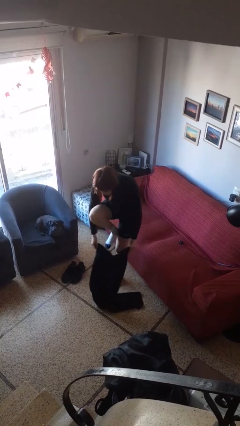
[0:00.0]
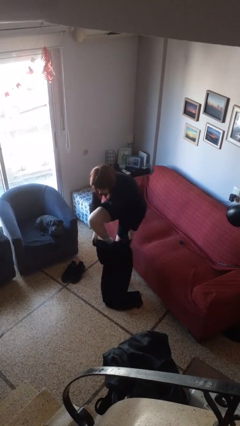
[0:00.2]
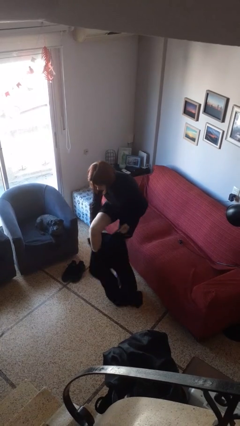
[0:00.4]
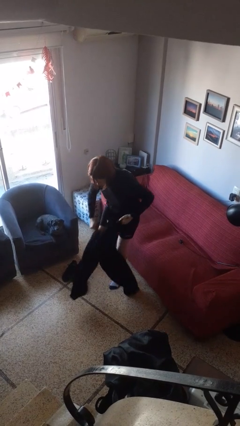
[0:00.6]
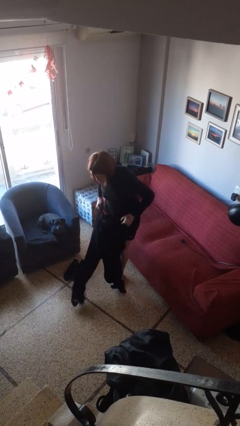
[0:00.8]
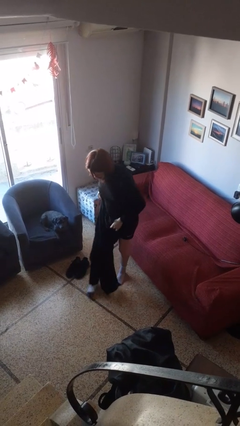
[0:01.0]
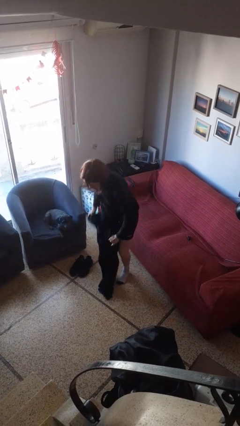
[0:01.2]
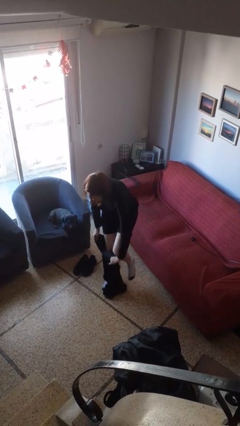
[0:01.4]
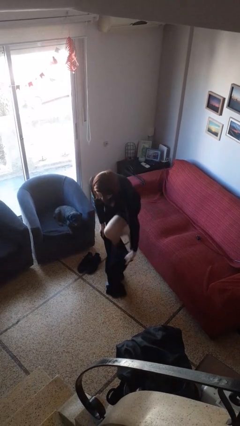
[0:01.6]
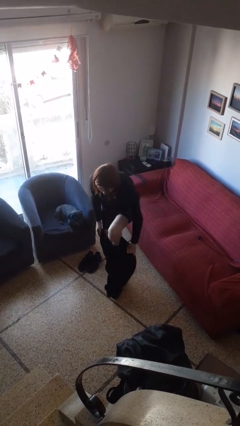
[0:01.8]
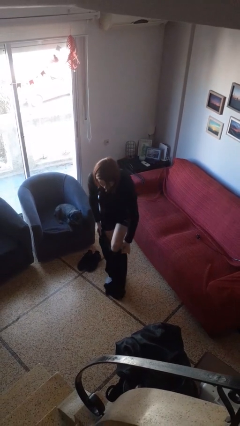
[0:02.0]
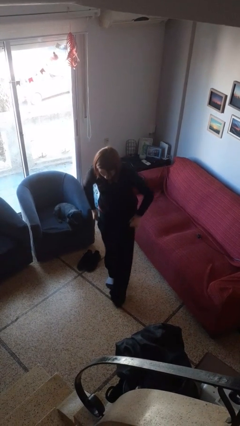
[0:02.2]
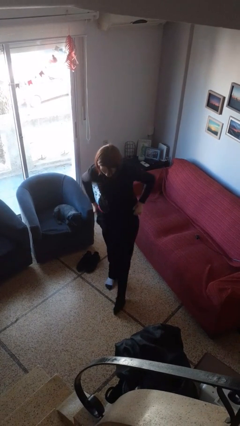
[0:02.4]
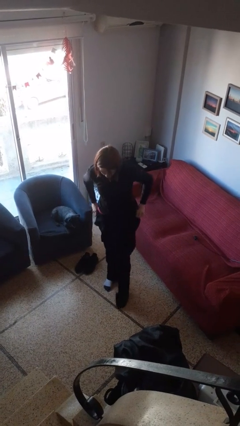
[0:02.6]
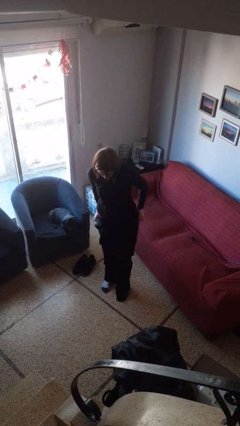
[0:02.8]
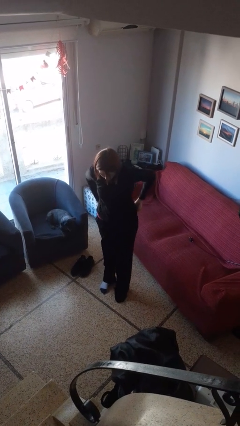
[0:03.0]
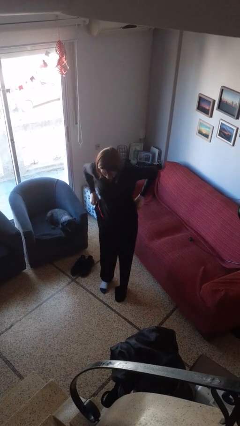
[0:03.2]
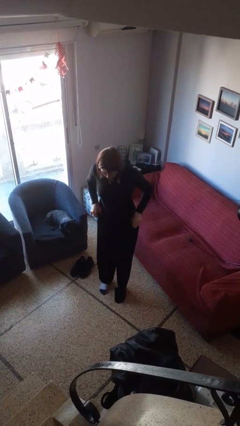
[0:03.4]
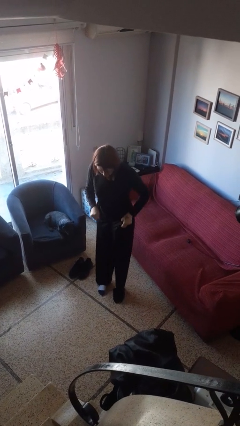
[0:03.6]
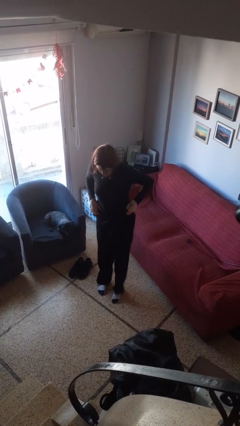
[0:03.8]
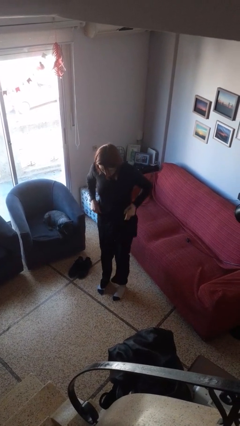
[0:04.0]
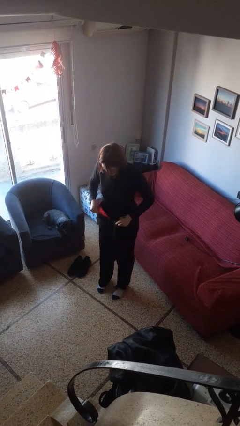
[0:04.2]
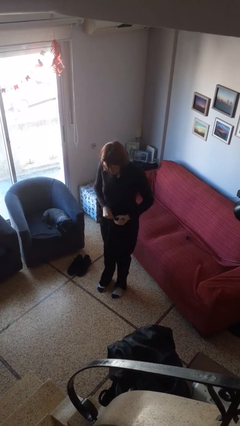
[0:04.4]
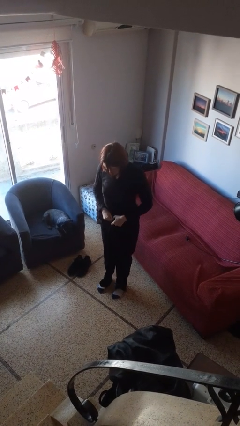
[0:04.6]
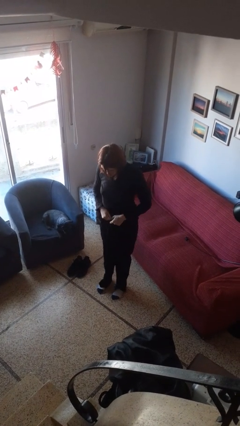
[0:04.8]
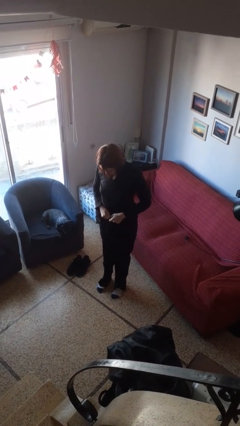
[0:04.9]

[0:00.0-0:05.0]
person puts on pants

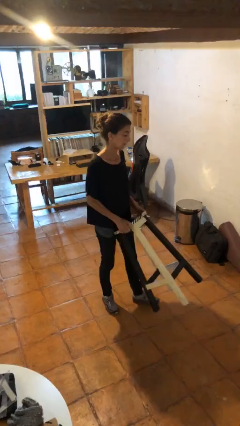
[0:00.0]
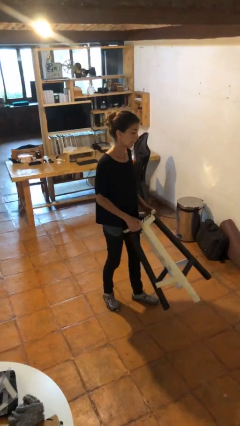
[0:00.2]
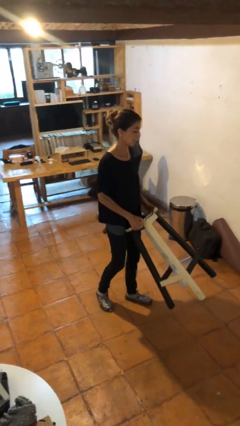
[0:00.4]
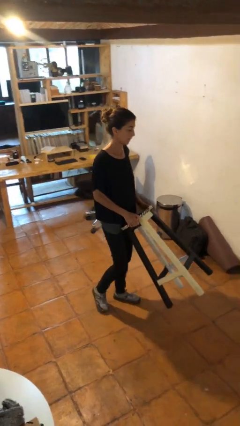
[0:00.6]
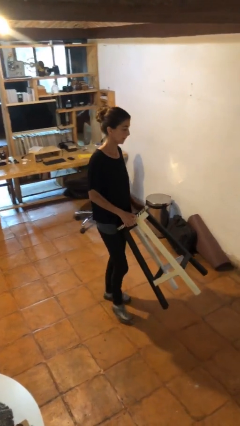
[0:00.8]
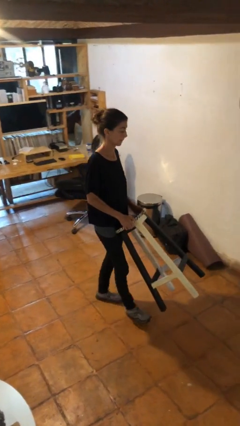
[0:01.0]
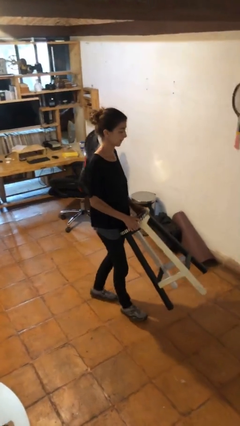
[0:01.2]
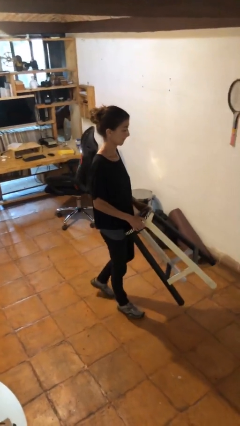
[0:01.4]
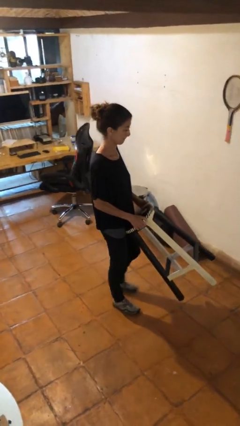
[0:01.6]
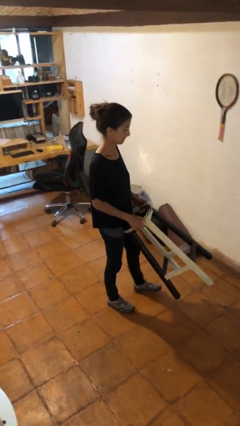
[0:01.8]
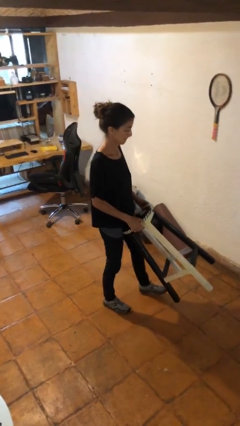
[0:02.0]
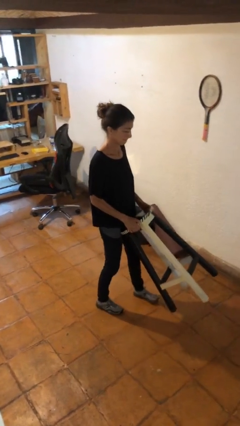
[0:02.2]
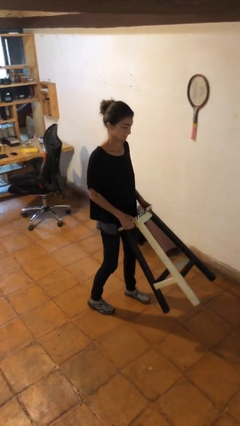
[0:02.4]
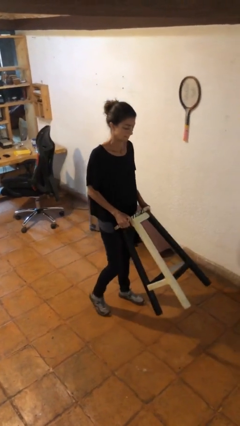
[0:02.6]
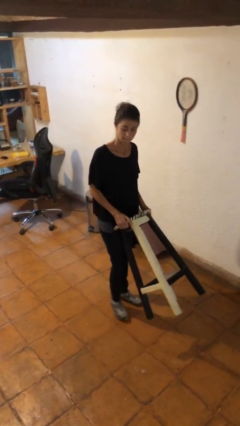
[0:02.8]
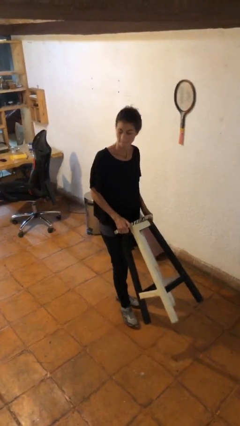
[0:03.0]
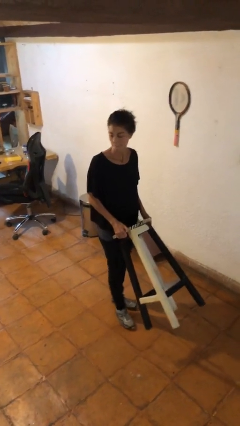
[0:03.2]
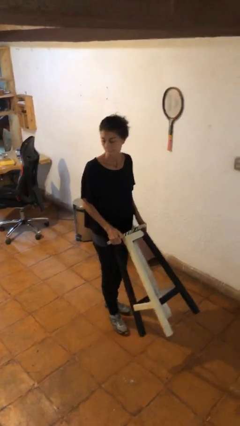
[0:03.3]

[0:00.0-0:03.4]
person carries furniture

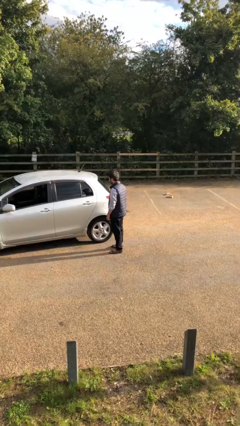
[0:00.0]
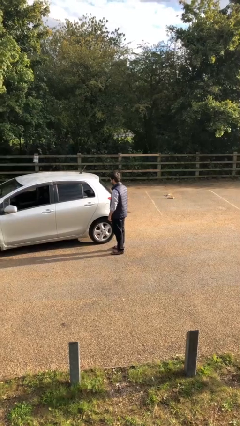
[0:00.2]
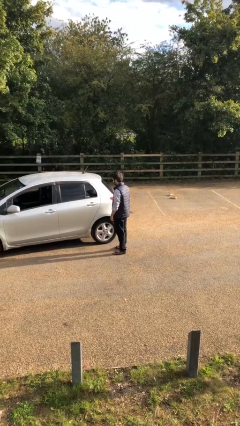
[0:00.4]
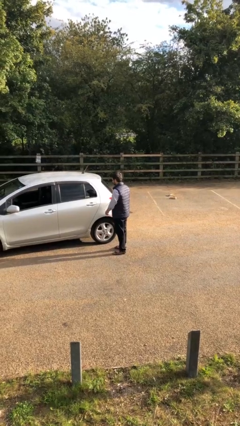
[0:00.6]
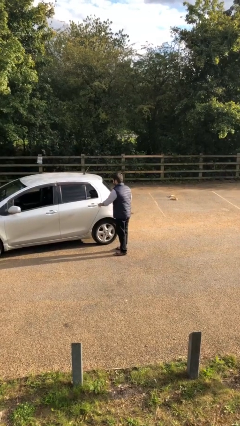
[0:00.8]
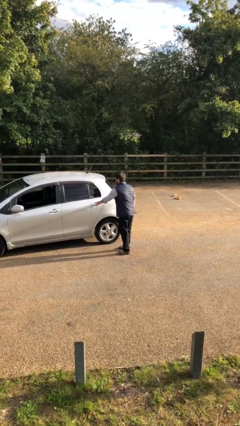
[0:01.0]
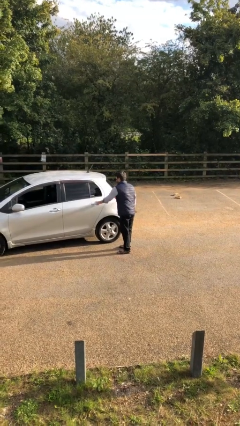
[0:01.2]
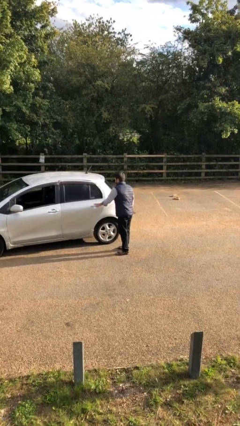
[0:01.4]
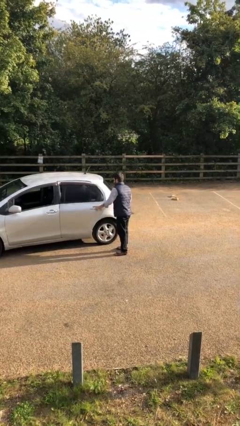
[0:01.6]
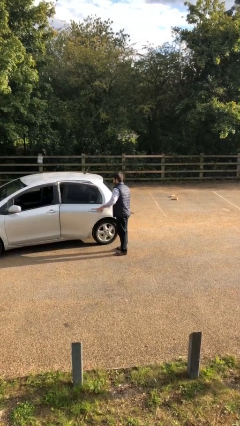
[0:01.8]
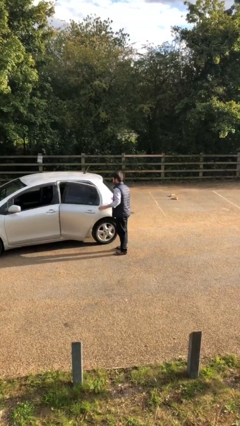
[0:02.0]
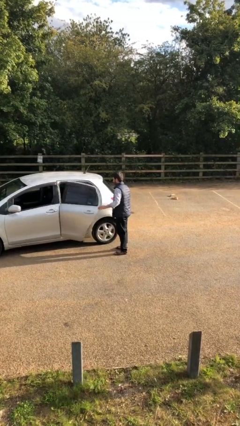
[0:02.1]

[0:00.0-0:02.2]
person opens car door

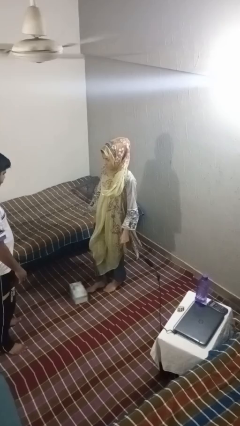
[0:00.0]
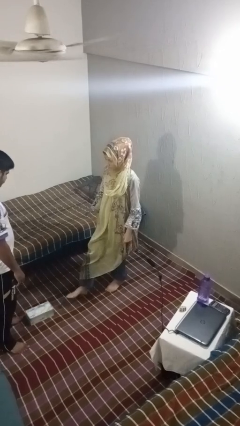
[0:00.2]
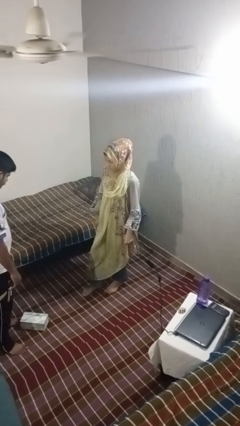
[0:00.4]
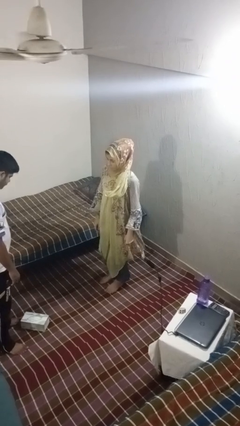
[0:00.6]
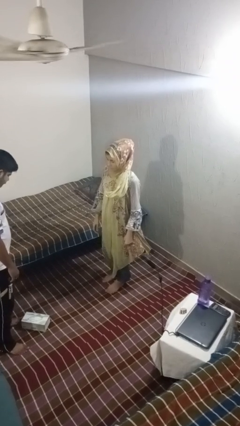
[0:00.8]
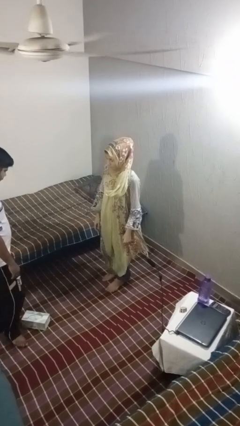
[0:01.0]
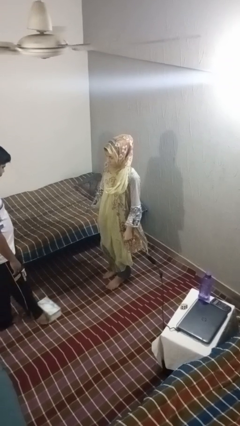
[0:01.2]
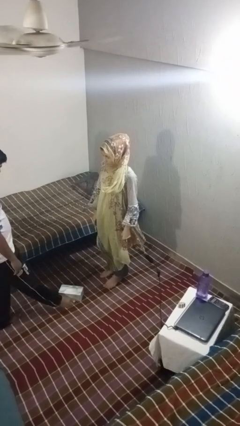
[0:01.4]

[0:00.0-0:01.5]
person kicks object to person

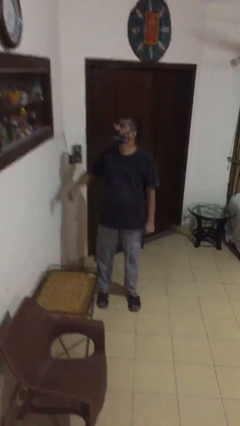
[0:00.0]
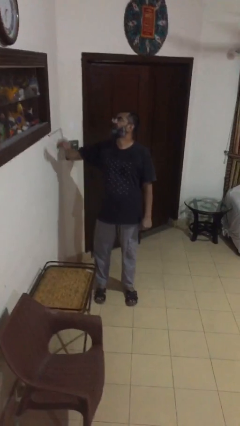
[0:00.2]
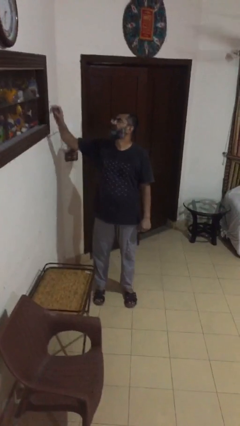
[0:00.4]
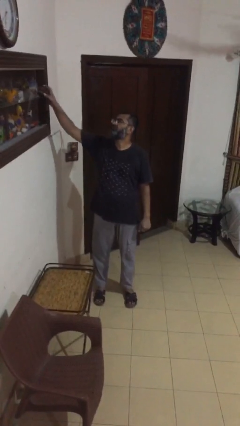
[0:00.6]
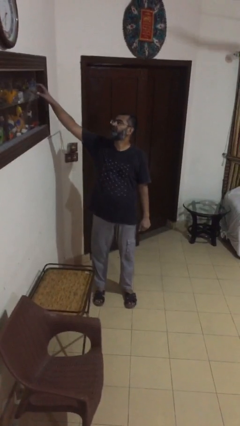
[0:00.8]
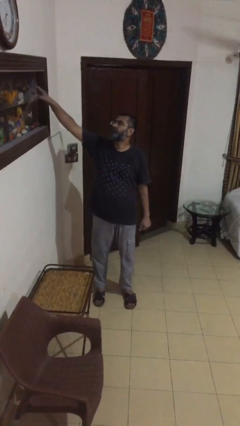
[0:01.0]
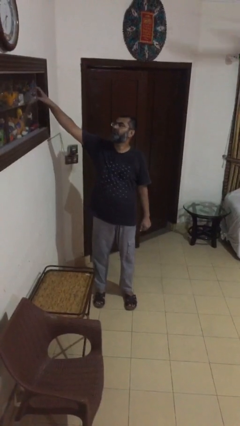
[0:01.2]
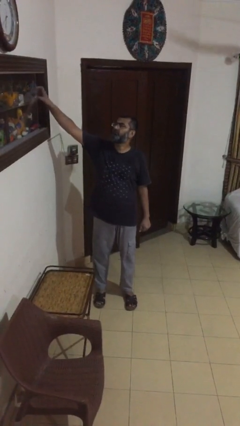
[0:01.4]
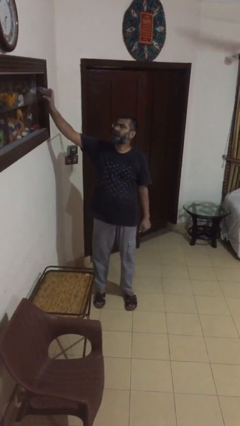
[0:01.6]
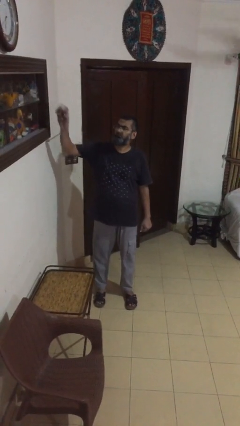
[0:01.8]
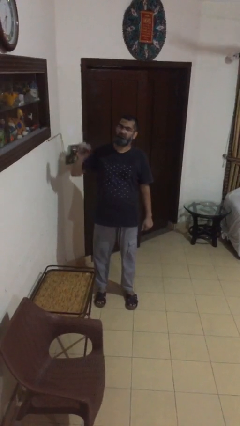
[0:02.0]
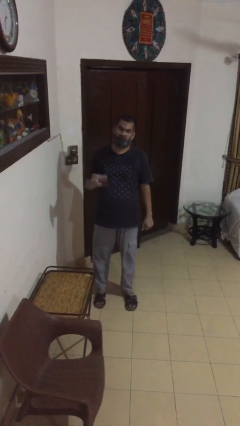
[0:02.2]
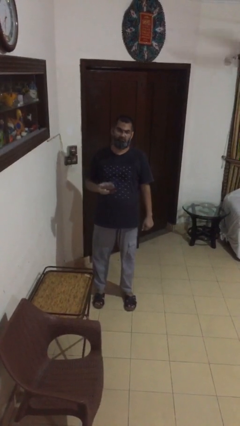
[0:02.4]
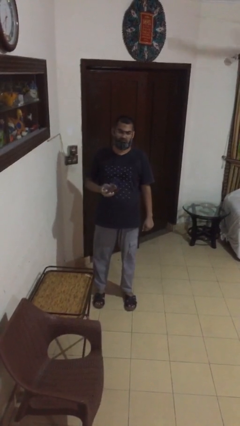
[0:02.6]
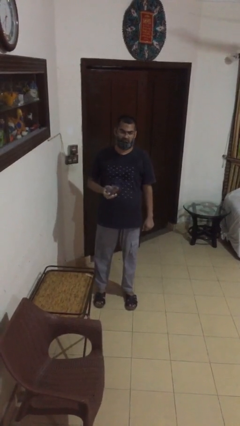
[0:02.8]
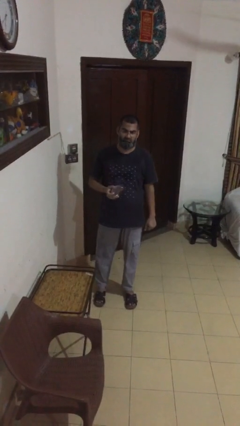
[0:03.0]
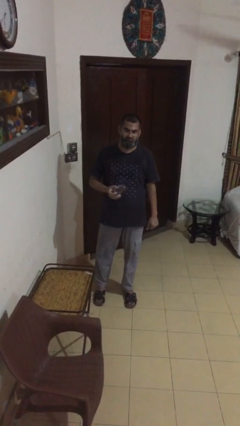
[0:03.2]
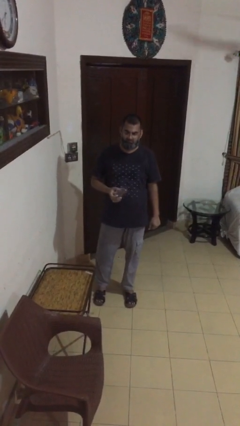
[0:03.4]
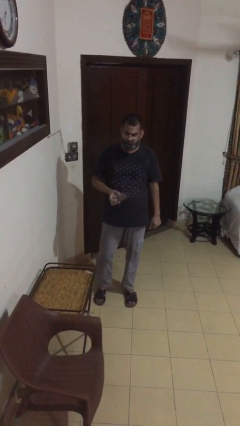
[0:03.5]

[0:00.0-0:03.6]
person picks up object from shelf

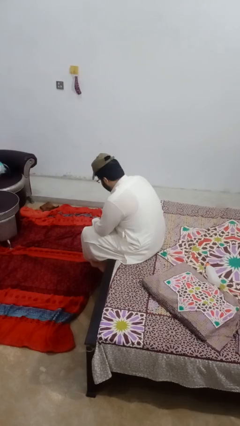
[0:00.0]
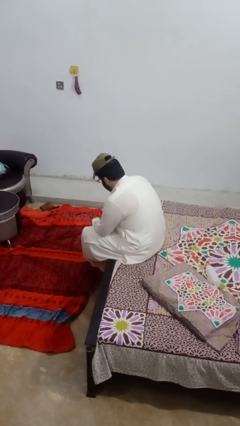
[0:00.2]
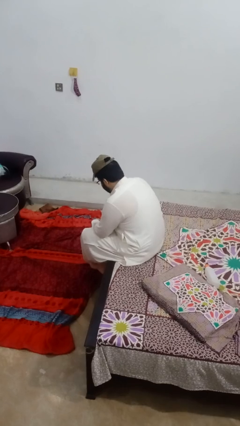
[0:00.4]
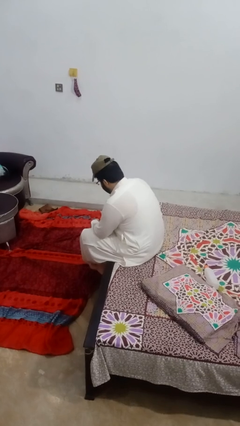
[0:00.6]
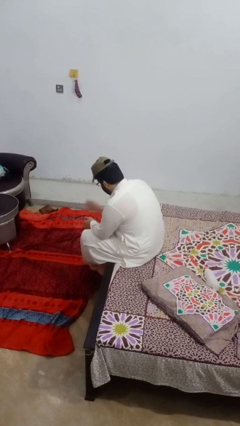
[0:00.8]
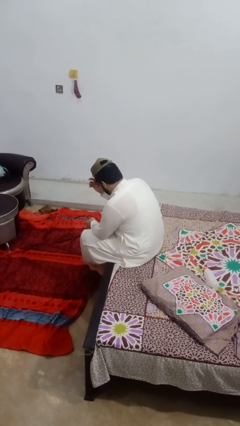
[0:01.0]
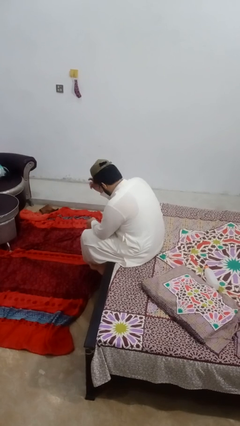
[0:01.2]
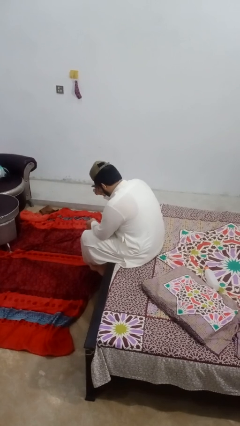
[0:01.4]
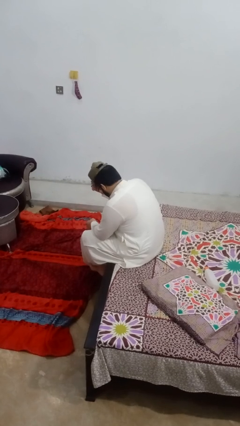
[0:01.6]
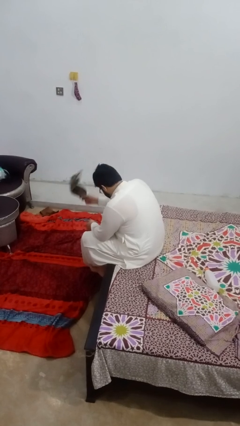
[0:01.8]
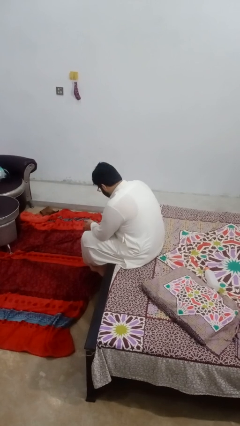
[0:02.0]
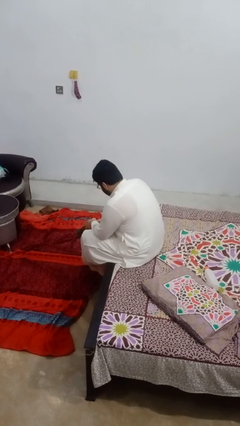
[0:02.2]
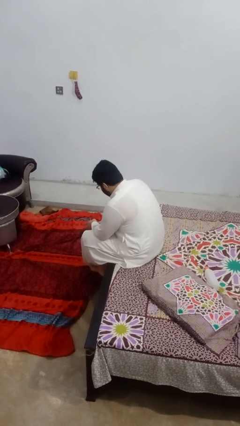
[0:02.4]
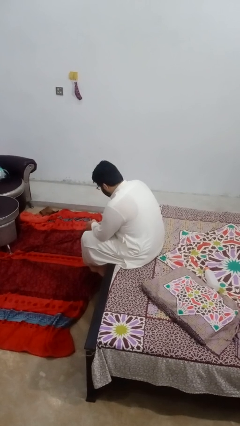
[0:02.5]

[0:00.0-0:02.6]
person takes off hat
